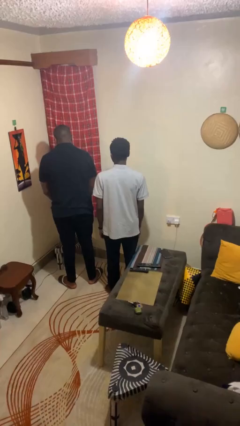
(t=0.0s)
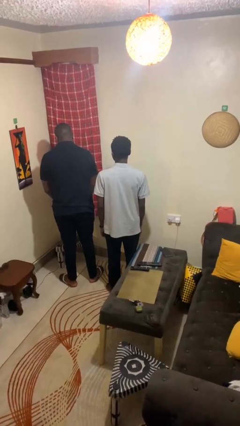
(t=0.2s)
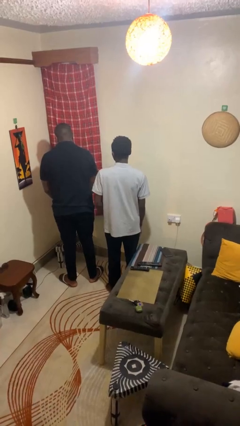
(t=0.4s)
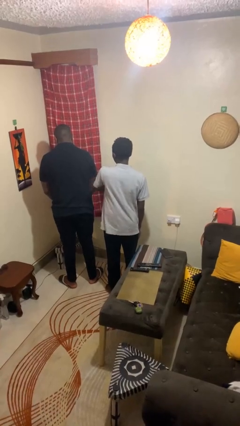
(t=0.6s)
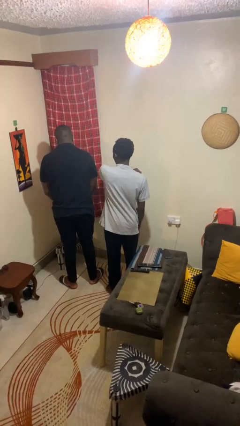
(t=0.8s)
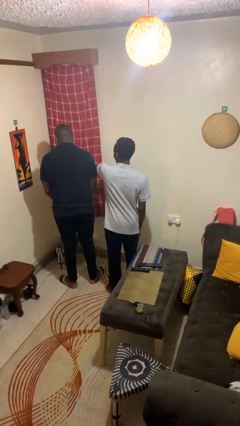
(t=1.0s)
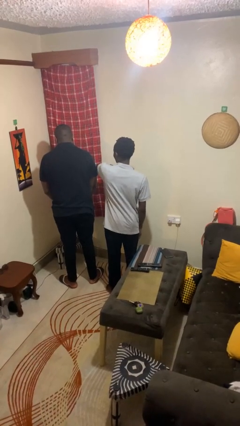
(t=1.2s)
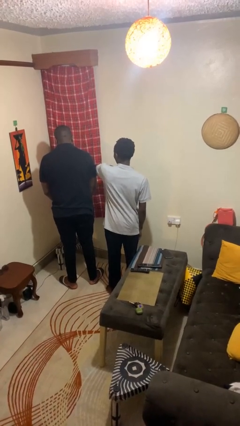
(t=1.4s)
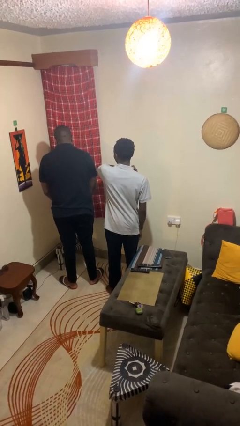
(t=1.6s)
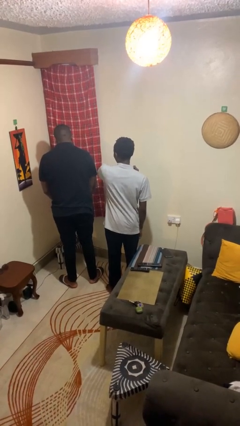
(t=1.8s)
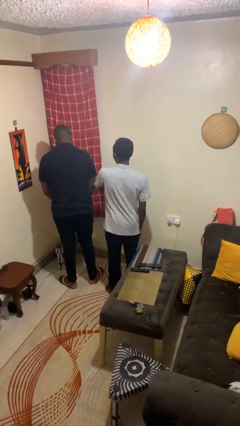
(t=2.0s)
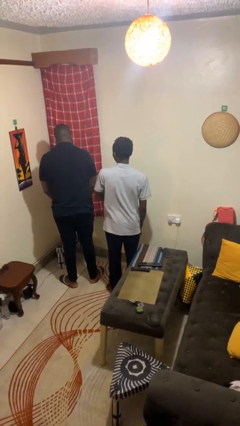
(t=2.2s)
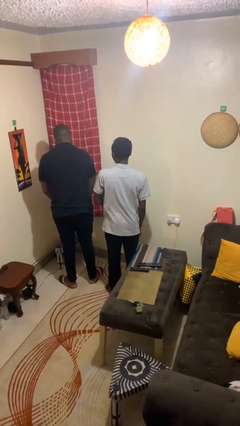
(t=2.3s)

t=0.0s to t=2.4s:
person nudges person with elbow

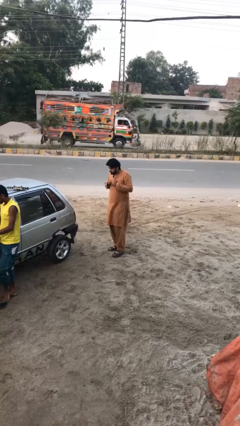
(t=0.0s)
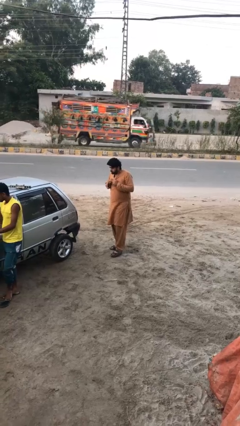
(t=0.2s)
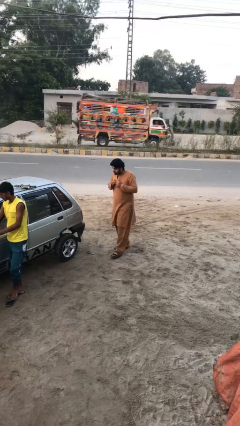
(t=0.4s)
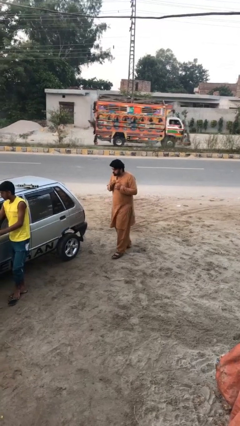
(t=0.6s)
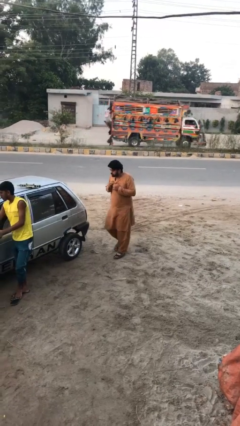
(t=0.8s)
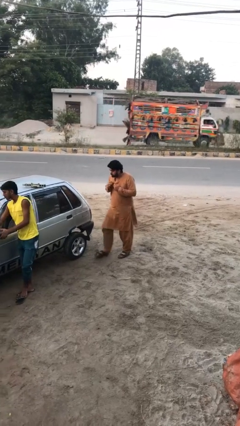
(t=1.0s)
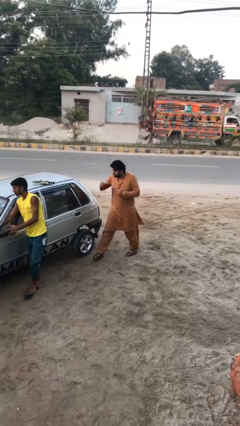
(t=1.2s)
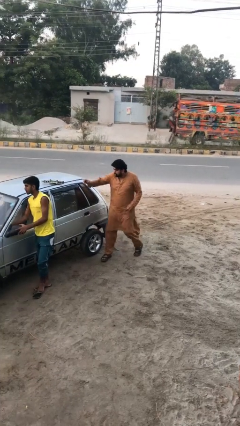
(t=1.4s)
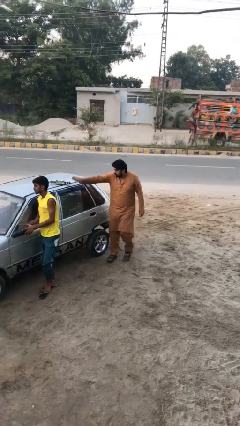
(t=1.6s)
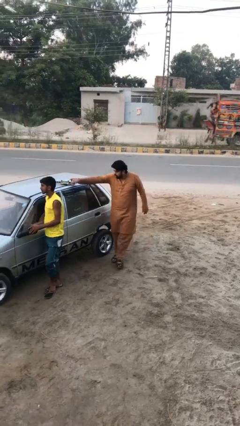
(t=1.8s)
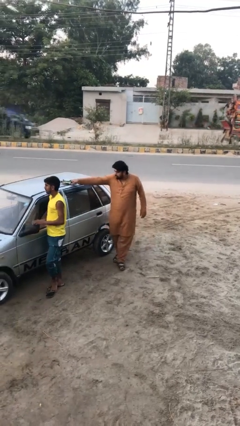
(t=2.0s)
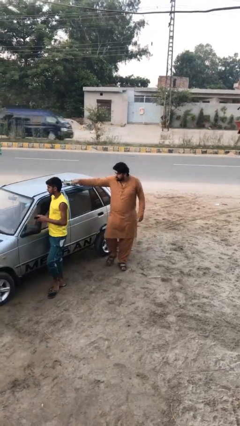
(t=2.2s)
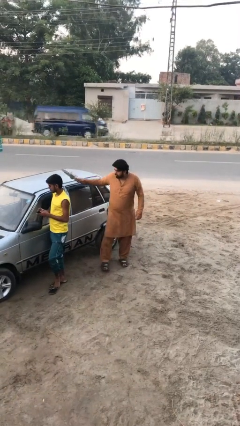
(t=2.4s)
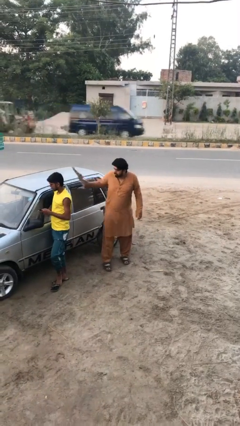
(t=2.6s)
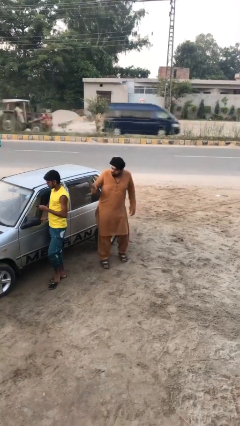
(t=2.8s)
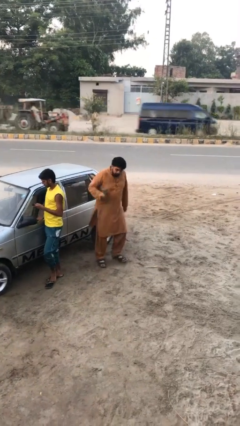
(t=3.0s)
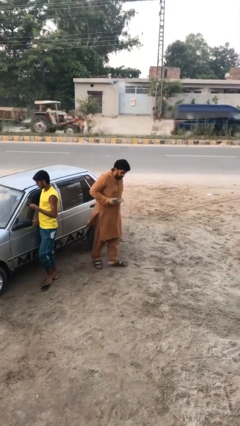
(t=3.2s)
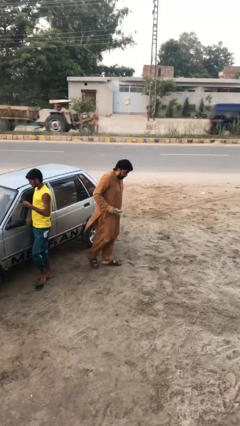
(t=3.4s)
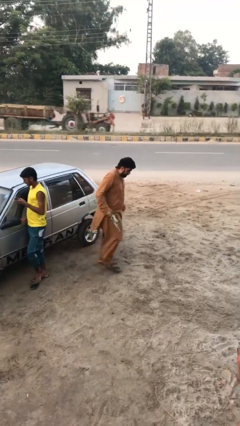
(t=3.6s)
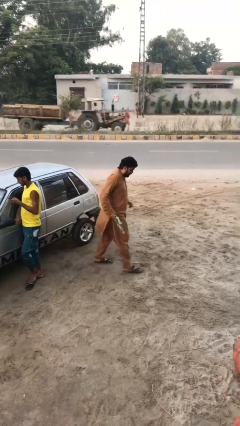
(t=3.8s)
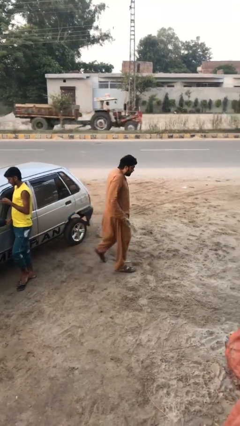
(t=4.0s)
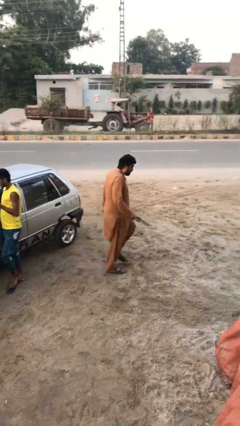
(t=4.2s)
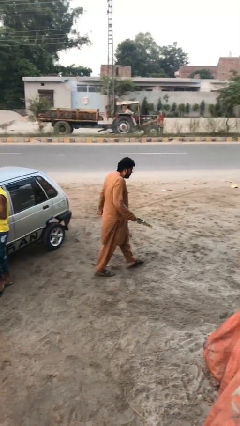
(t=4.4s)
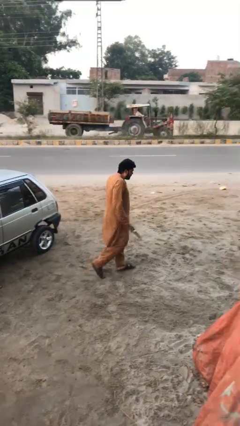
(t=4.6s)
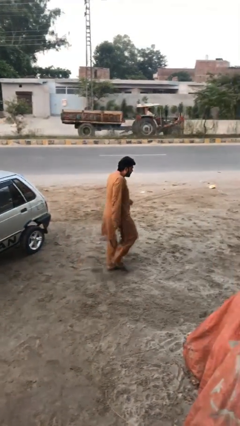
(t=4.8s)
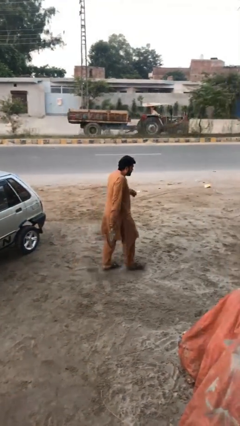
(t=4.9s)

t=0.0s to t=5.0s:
person steals object from person

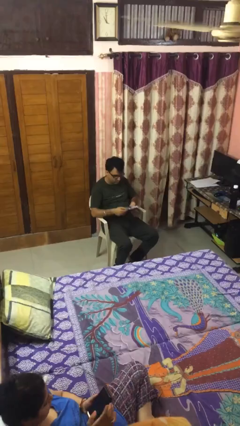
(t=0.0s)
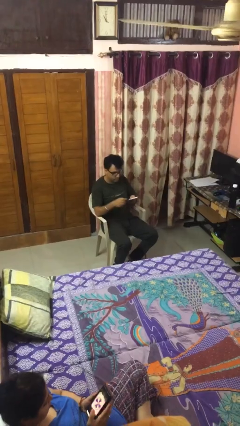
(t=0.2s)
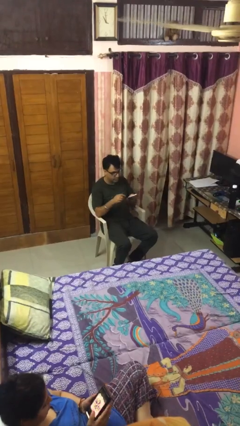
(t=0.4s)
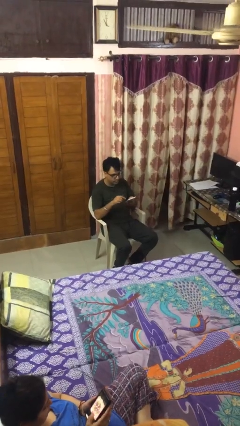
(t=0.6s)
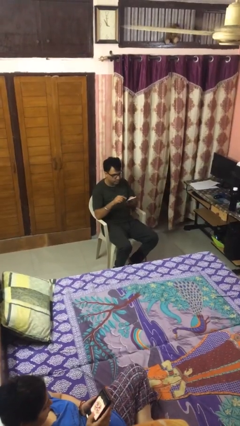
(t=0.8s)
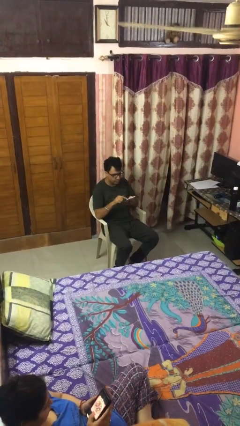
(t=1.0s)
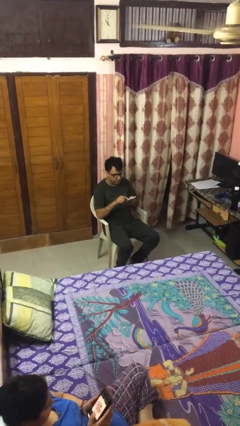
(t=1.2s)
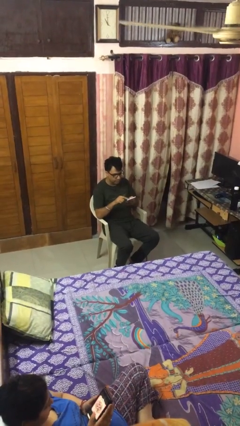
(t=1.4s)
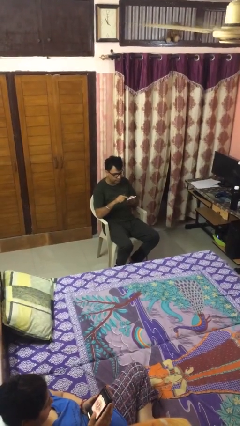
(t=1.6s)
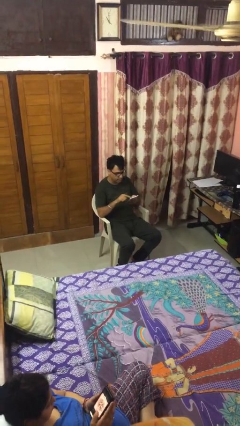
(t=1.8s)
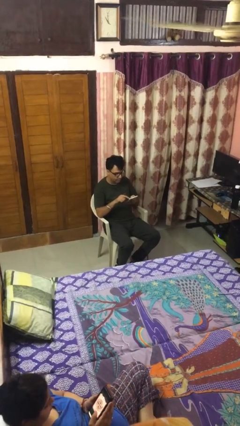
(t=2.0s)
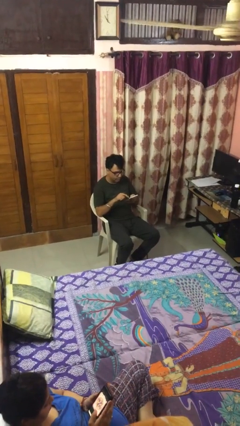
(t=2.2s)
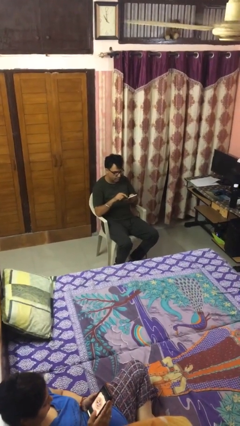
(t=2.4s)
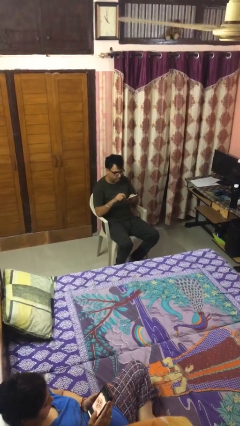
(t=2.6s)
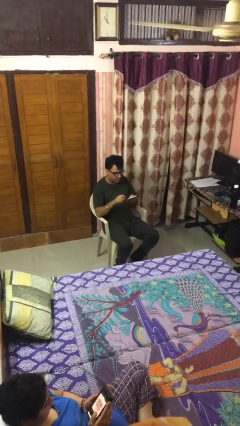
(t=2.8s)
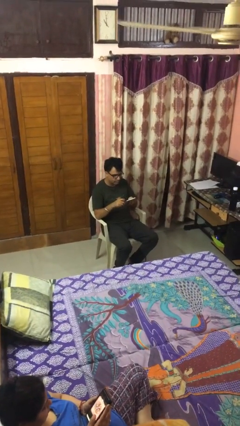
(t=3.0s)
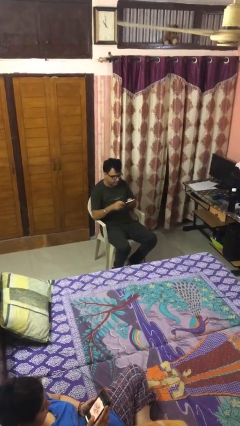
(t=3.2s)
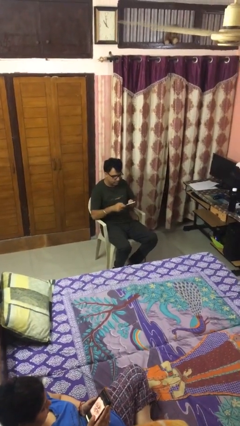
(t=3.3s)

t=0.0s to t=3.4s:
person interacts with tablet

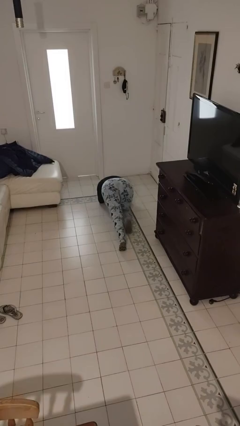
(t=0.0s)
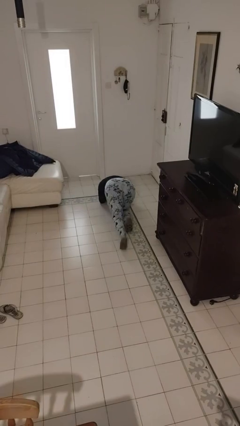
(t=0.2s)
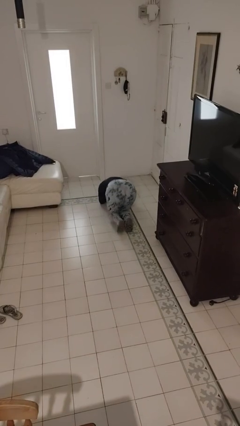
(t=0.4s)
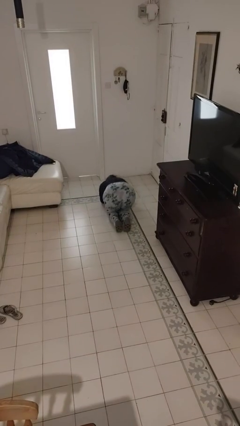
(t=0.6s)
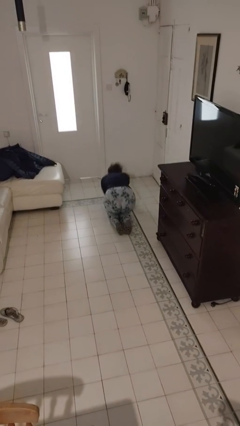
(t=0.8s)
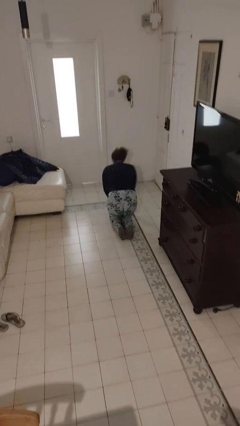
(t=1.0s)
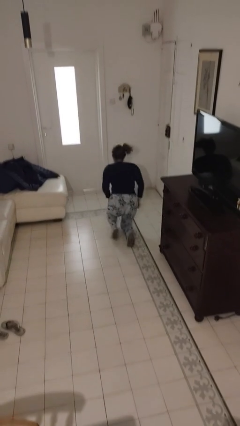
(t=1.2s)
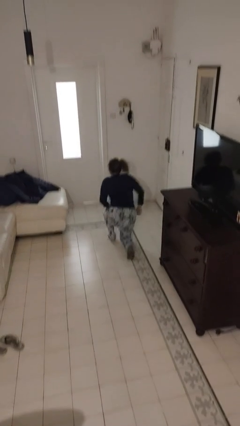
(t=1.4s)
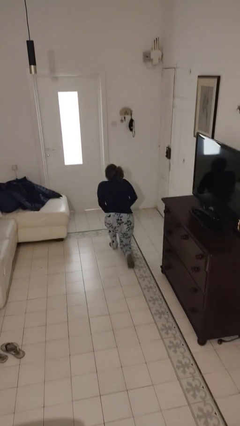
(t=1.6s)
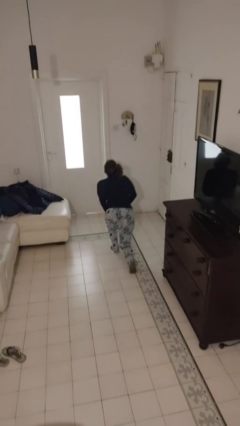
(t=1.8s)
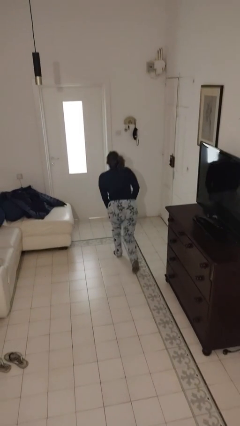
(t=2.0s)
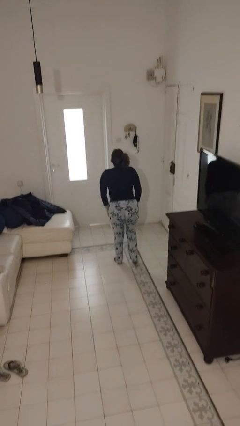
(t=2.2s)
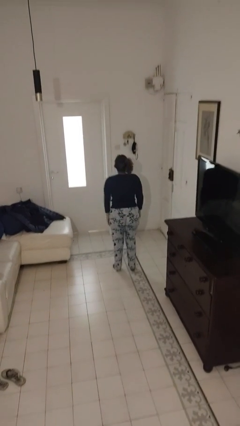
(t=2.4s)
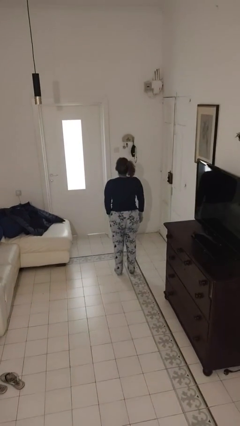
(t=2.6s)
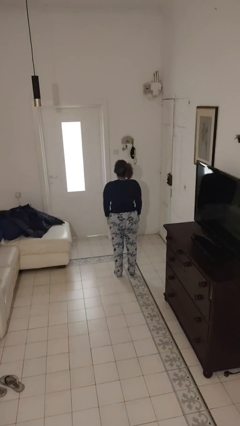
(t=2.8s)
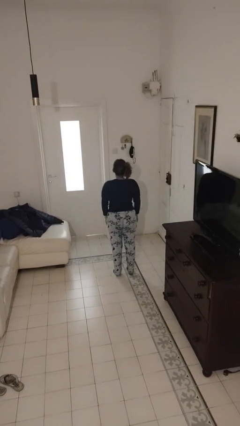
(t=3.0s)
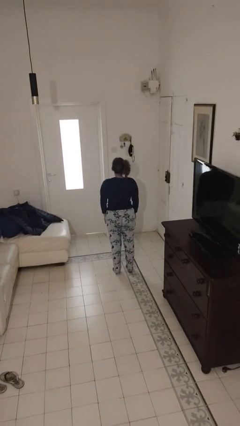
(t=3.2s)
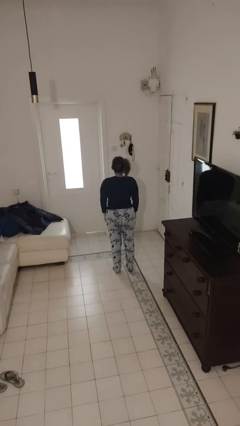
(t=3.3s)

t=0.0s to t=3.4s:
person stands up from floor

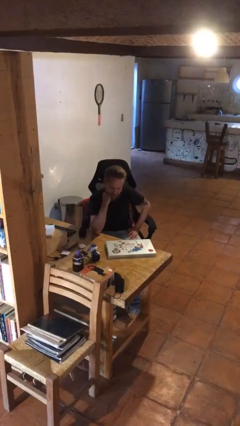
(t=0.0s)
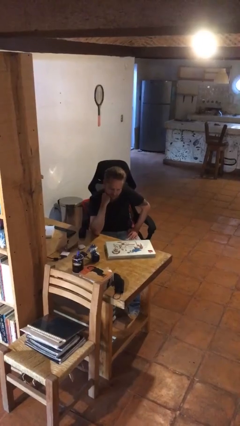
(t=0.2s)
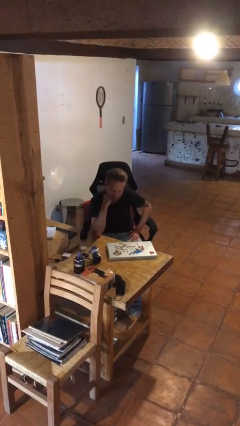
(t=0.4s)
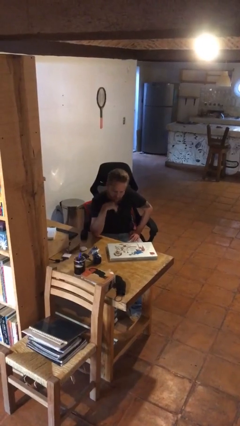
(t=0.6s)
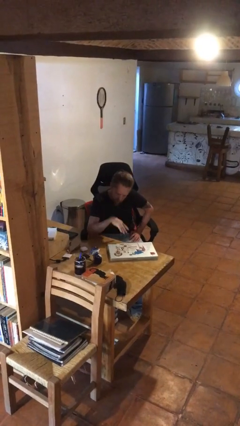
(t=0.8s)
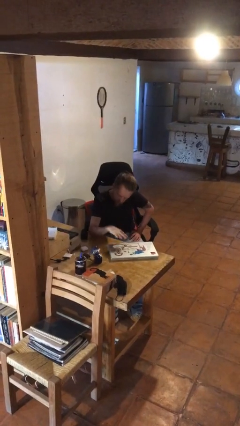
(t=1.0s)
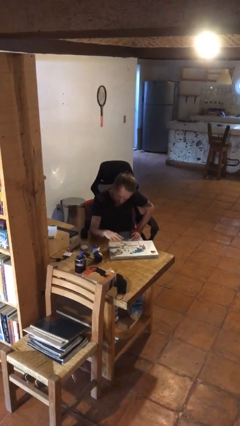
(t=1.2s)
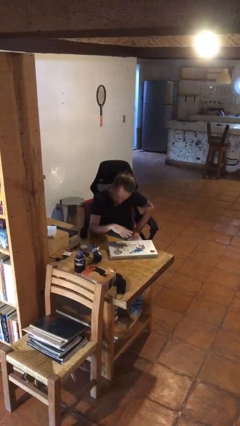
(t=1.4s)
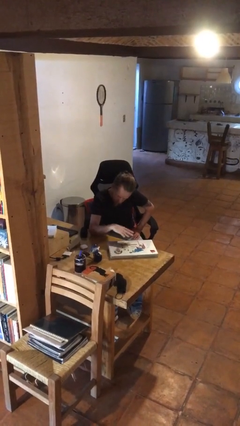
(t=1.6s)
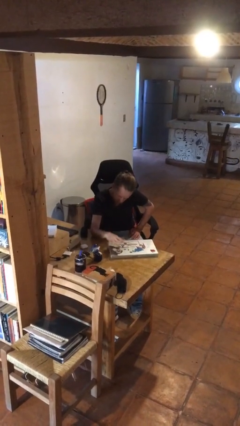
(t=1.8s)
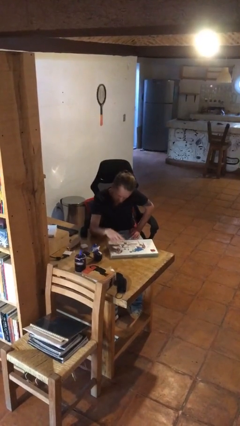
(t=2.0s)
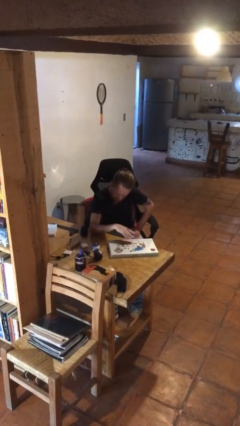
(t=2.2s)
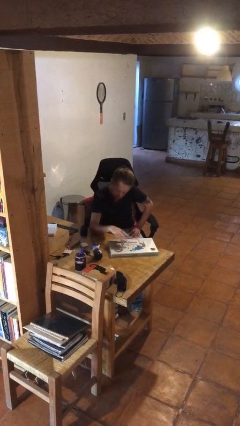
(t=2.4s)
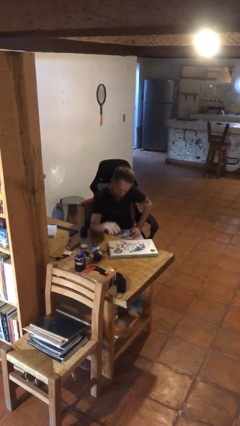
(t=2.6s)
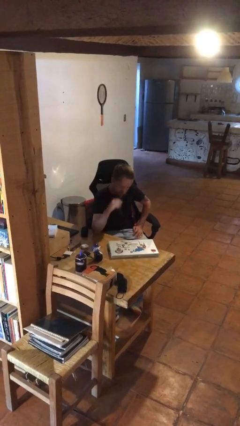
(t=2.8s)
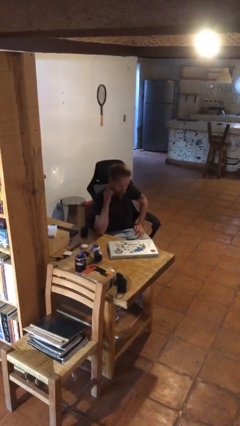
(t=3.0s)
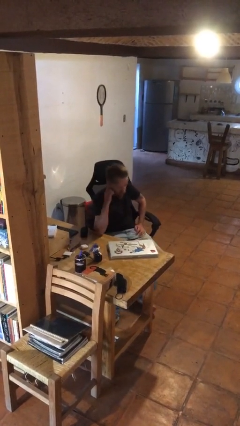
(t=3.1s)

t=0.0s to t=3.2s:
person waves hand over object
